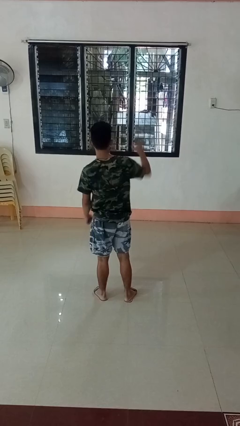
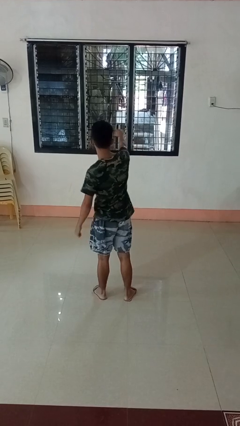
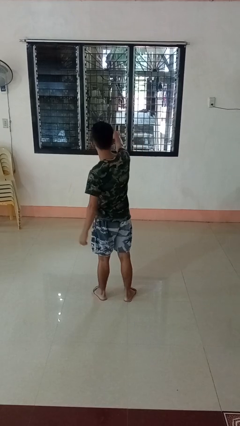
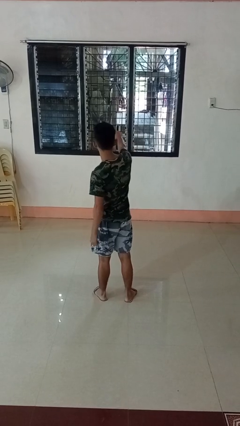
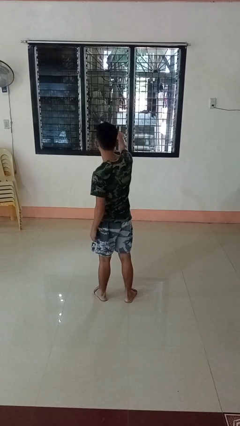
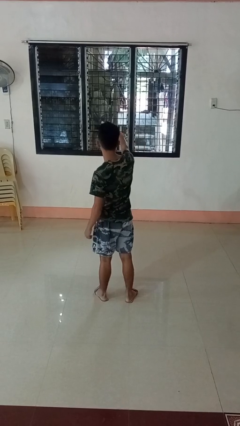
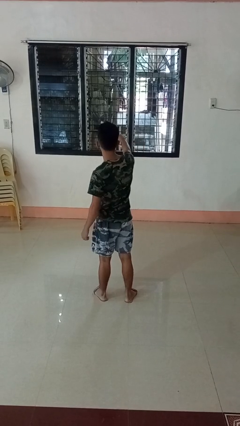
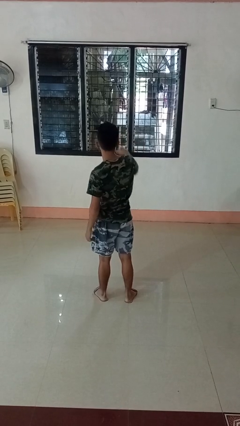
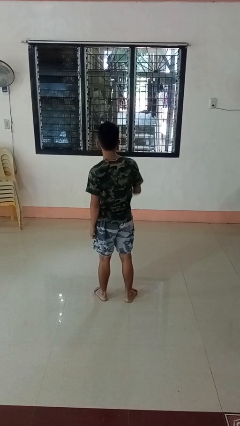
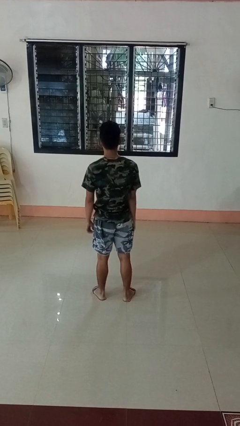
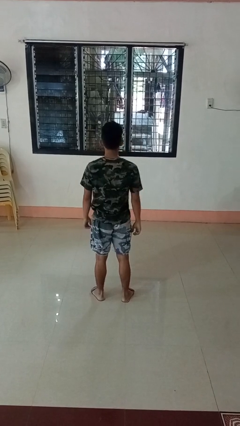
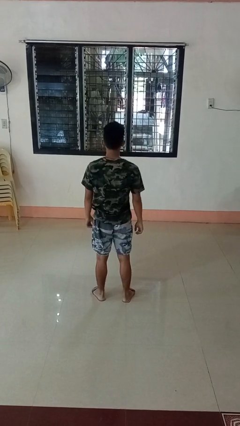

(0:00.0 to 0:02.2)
person punches

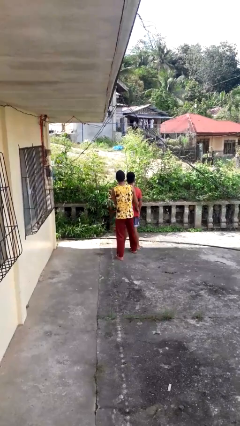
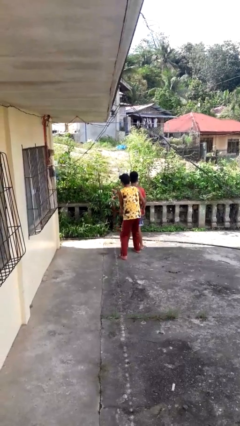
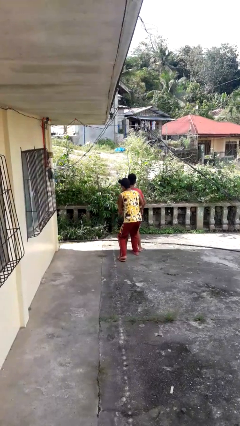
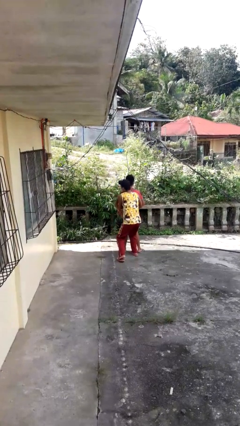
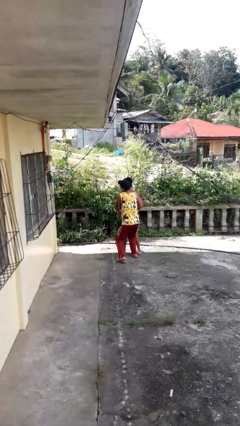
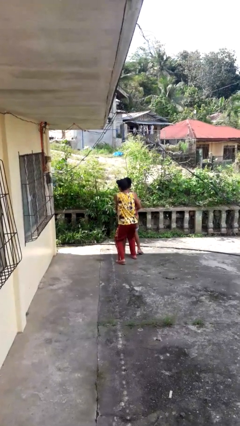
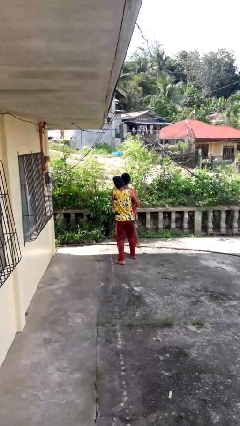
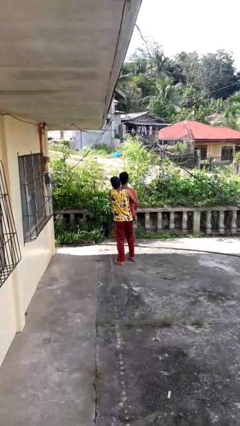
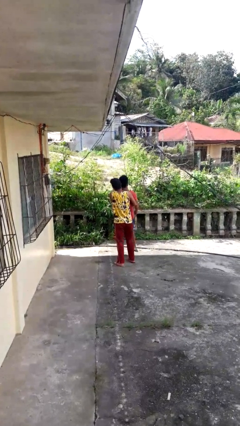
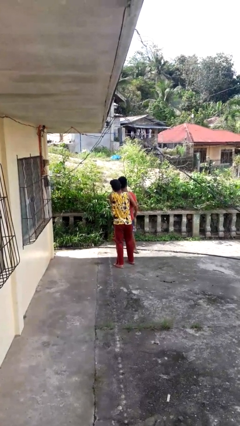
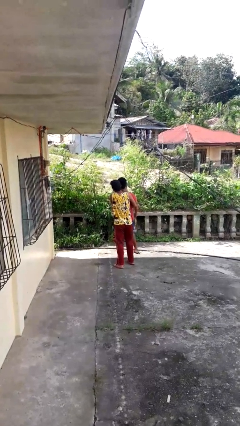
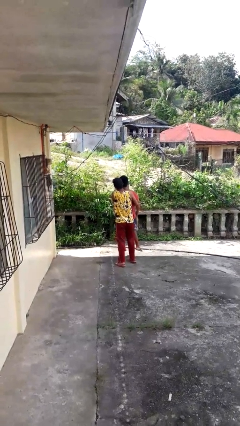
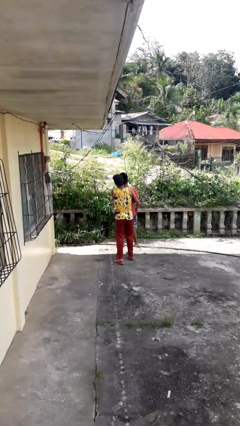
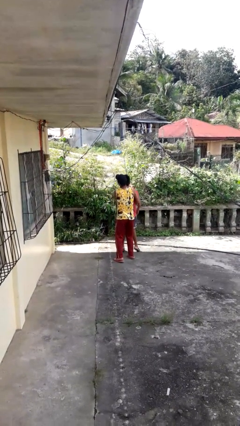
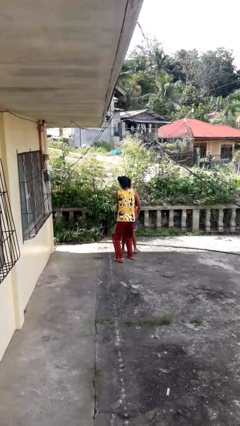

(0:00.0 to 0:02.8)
person picks up person

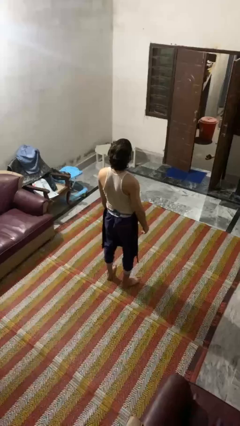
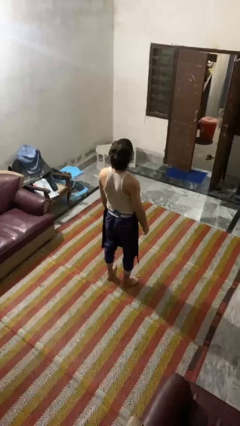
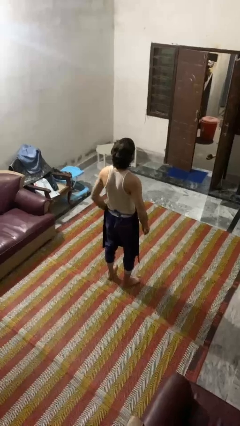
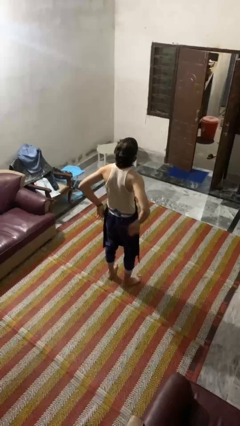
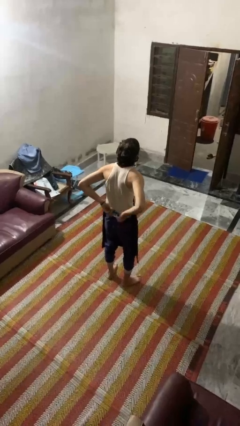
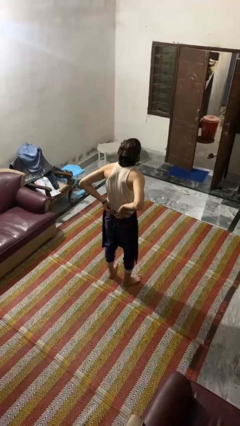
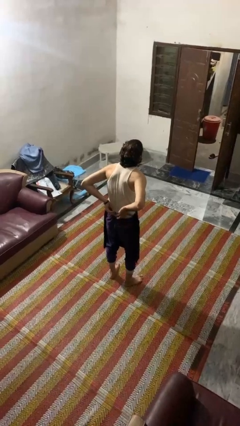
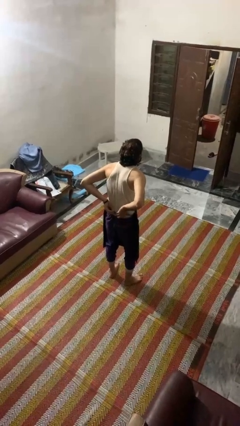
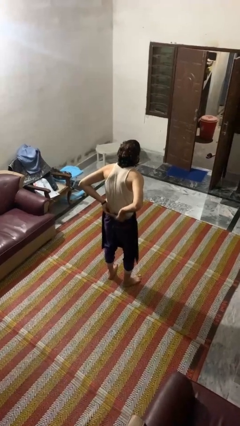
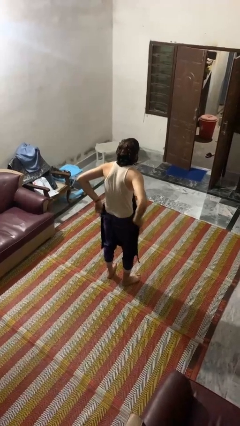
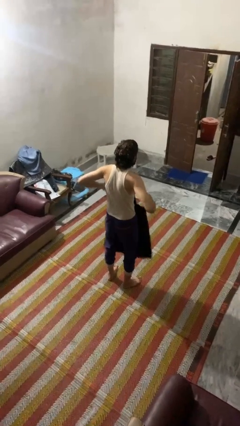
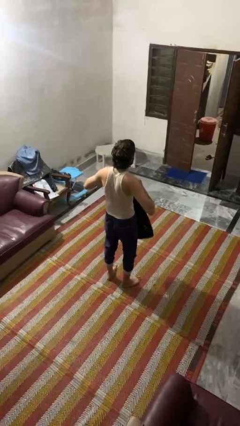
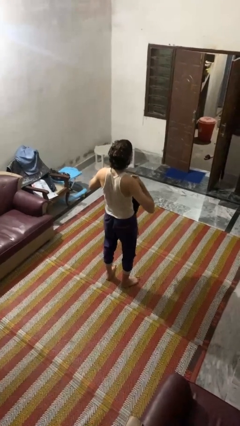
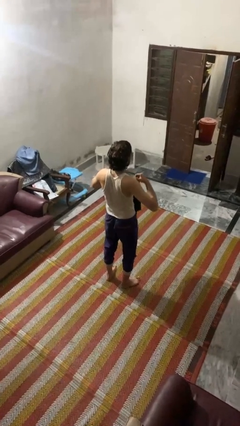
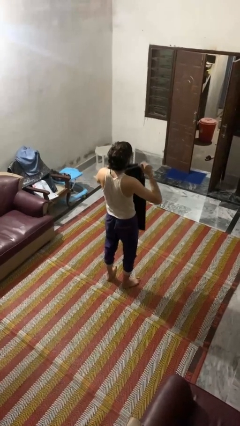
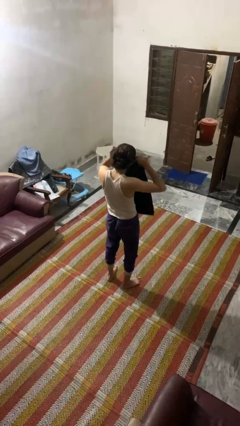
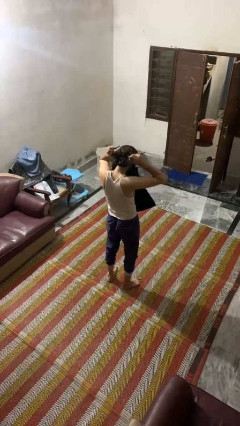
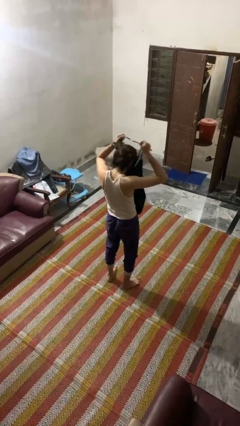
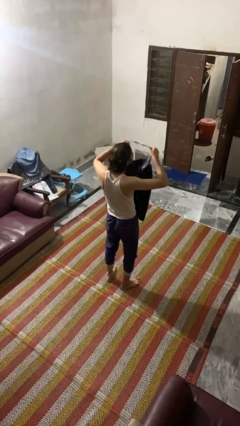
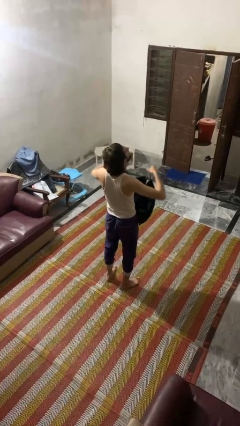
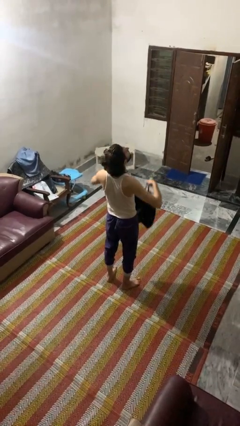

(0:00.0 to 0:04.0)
person takes off apron

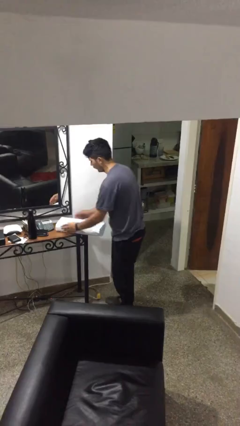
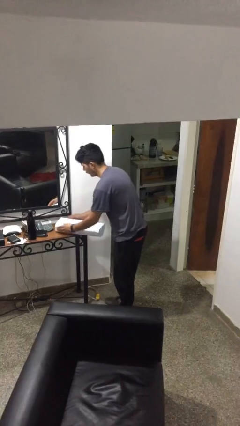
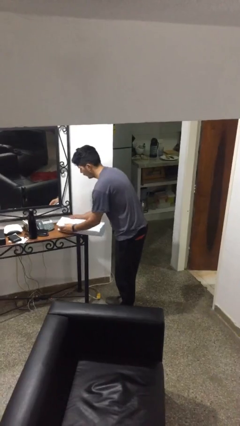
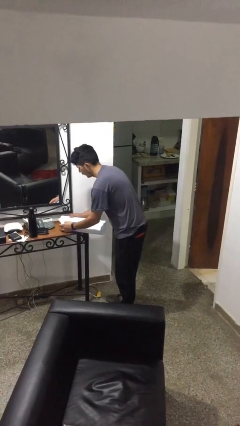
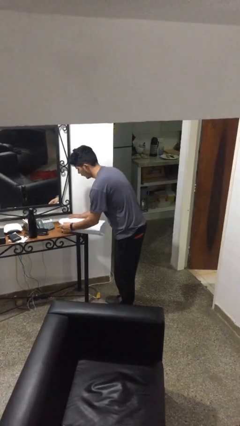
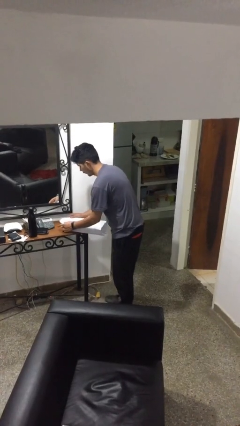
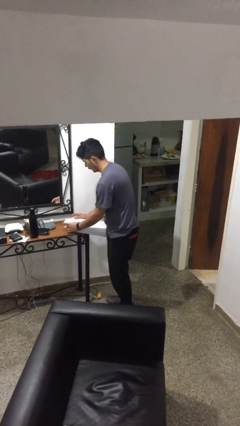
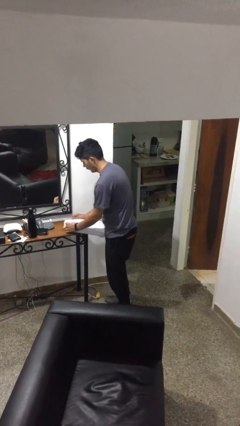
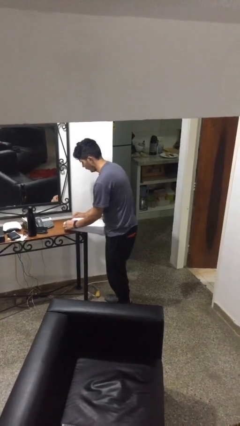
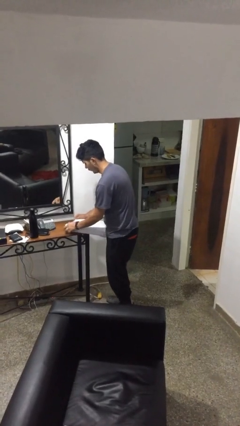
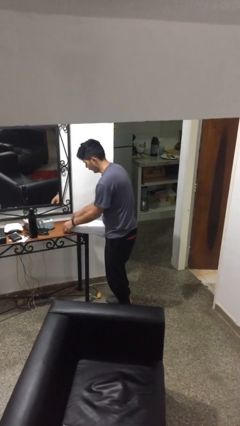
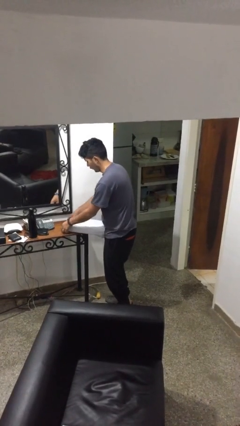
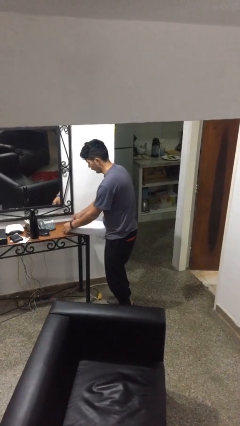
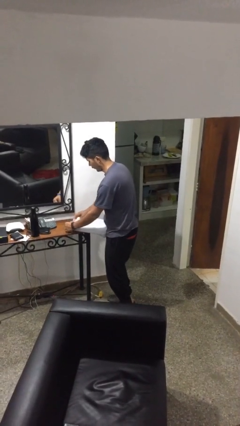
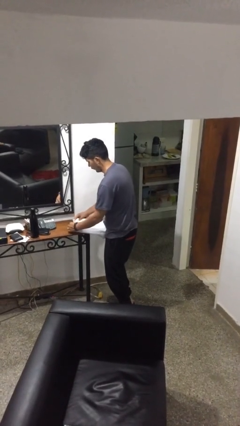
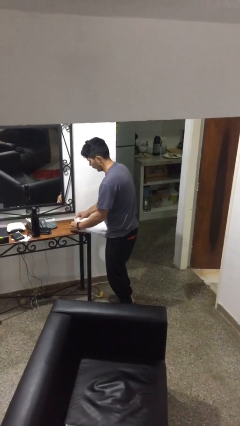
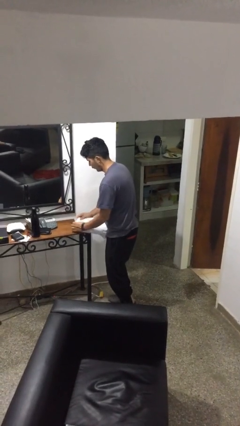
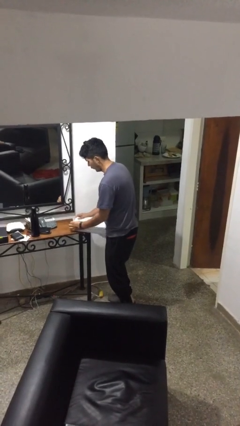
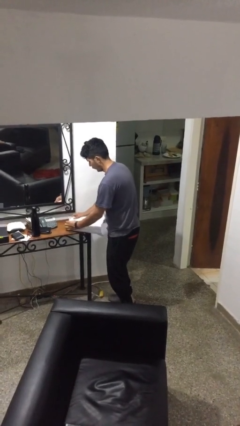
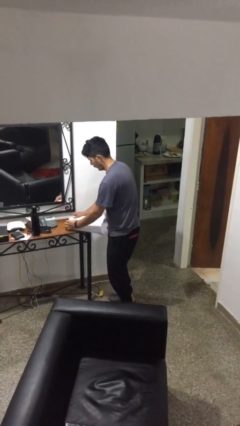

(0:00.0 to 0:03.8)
person wraps box

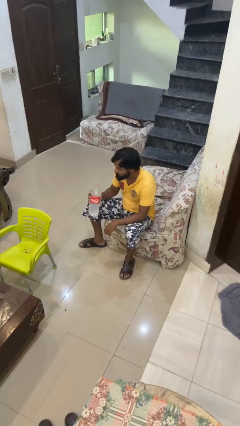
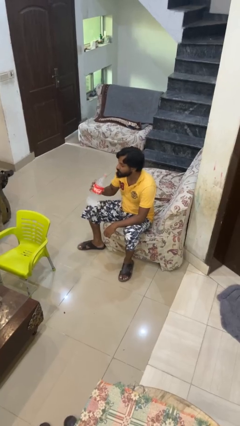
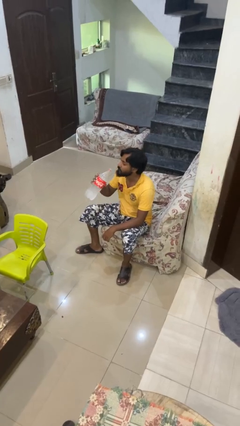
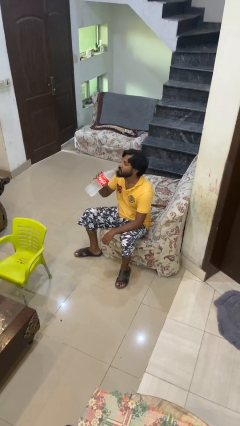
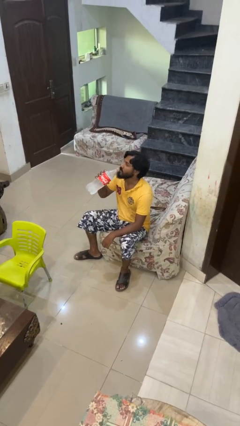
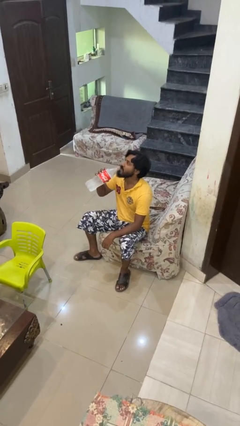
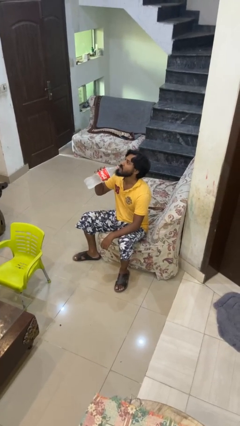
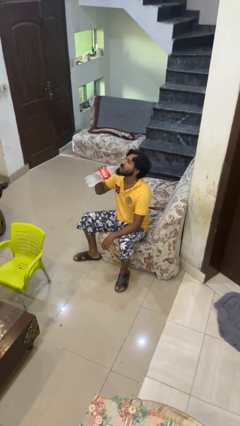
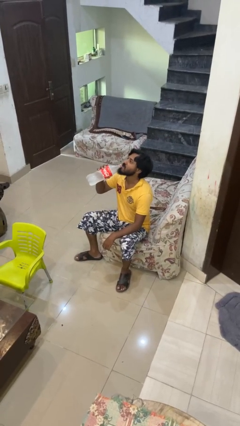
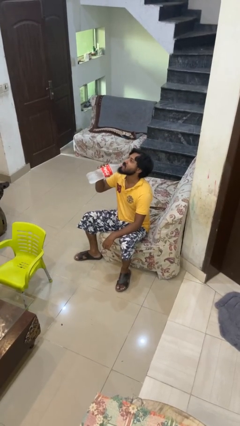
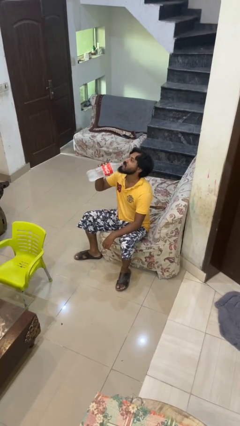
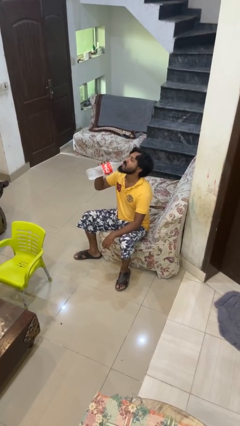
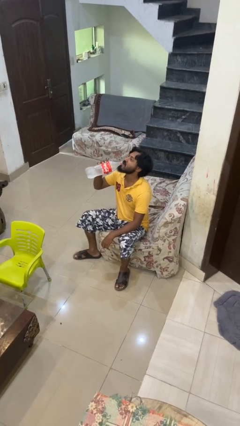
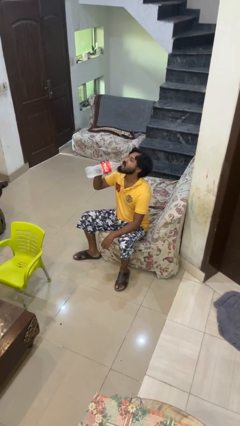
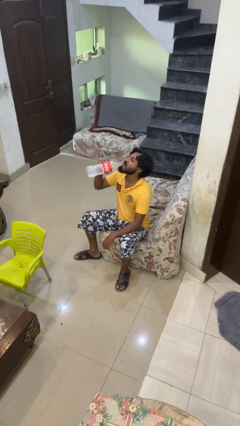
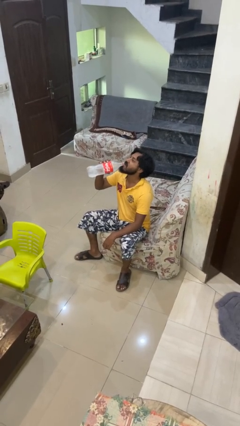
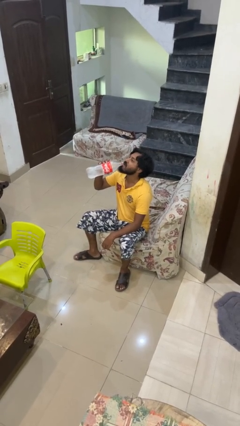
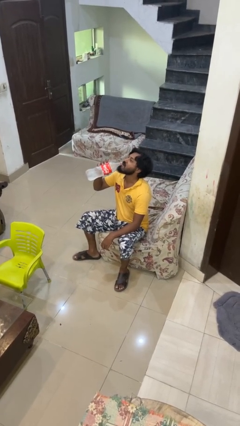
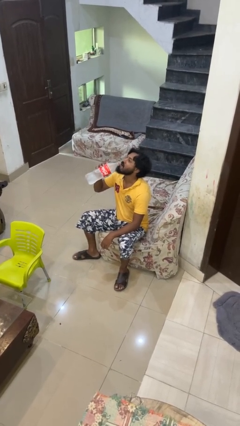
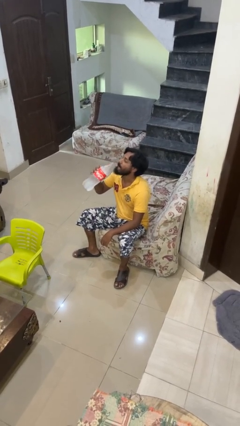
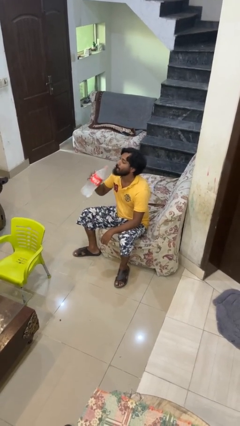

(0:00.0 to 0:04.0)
person drinks from bottle

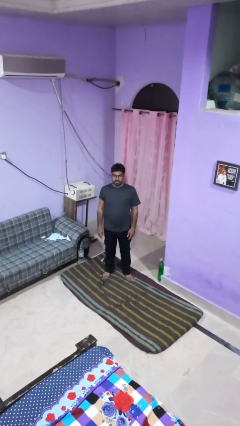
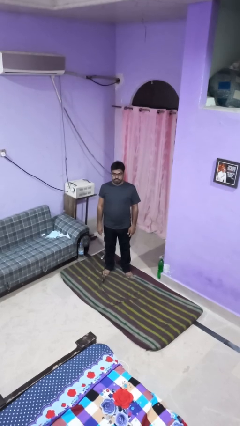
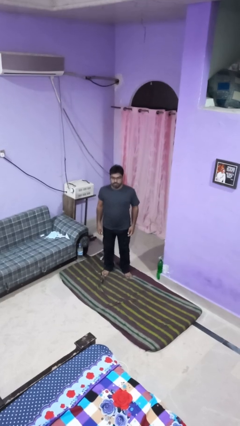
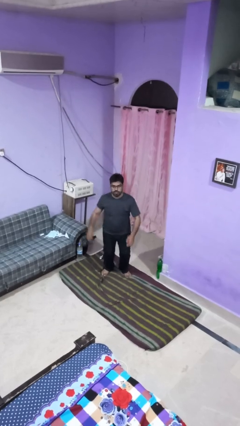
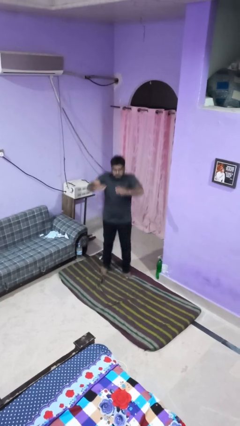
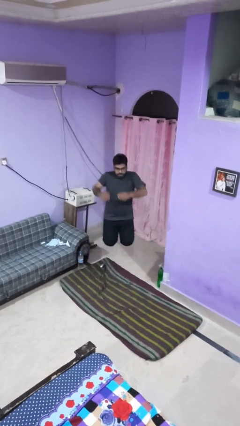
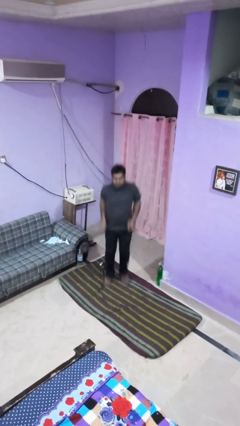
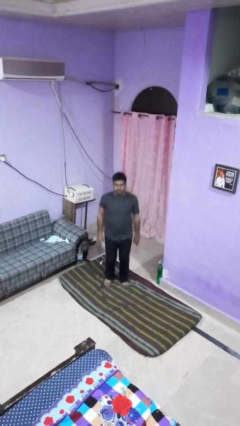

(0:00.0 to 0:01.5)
person jumps
